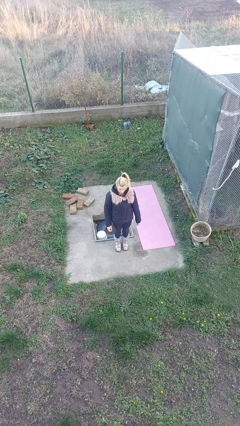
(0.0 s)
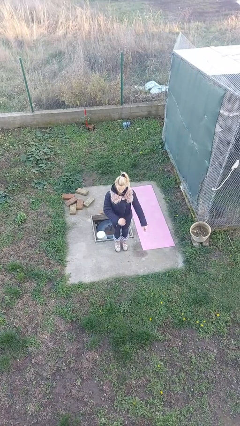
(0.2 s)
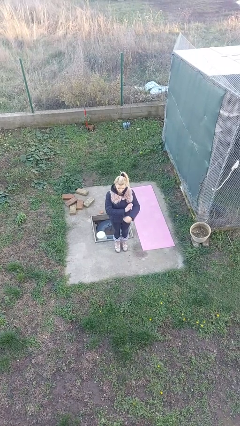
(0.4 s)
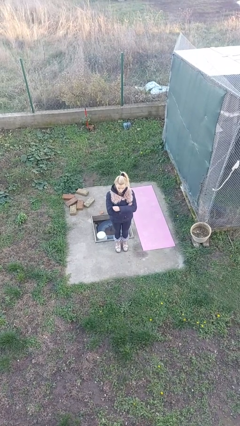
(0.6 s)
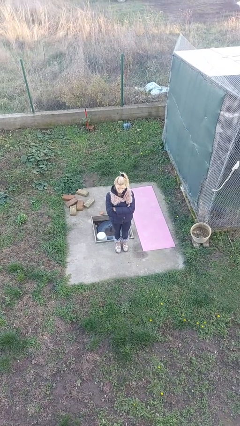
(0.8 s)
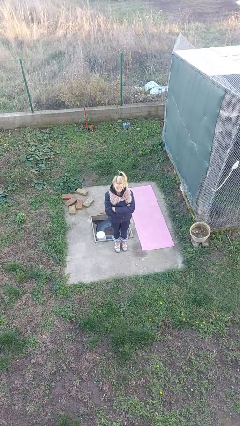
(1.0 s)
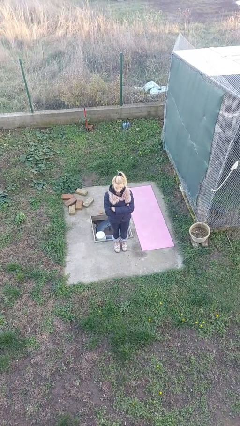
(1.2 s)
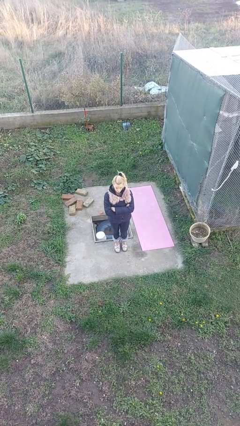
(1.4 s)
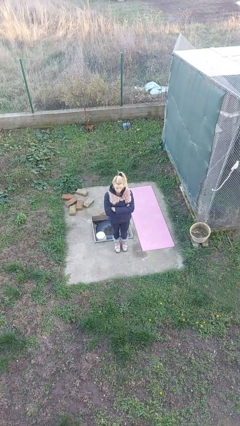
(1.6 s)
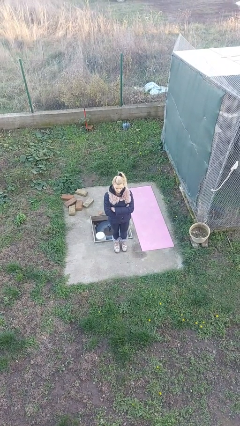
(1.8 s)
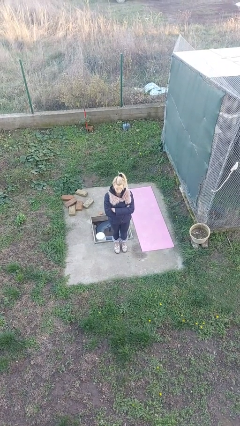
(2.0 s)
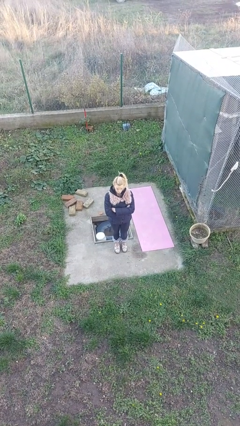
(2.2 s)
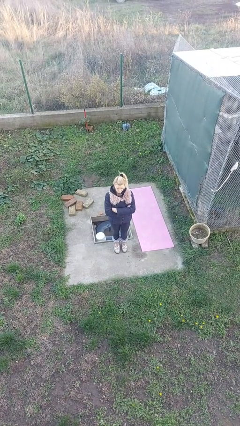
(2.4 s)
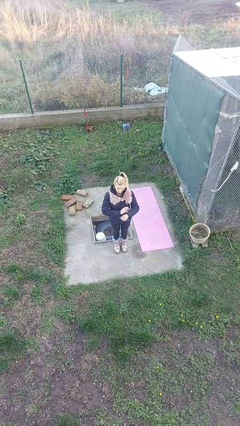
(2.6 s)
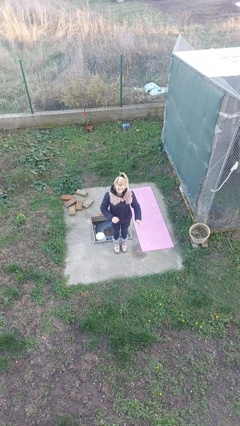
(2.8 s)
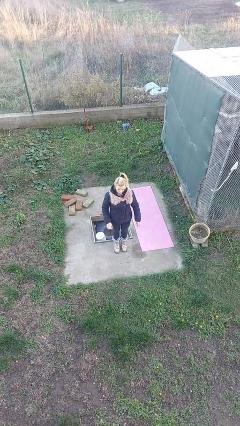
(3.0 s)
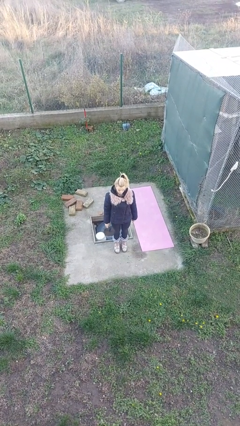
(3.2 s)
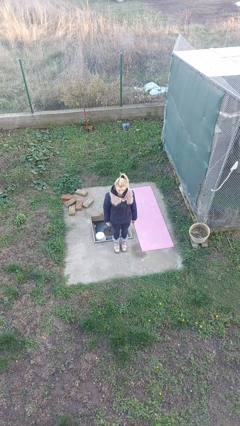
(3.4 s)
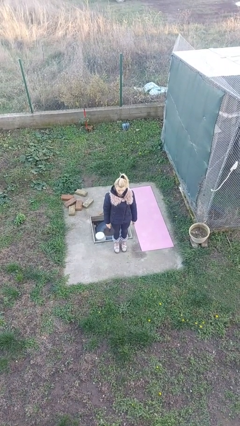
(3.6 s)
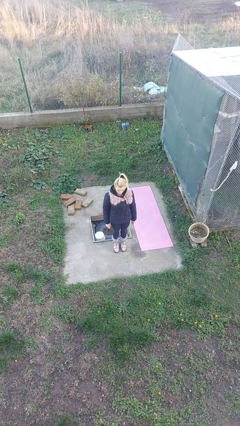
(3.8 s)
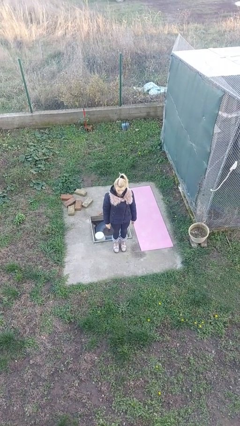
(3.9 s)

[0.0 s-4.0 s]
person crosses arms

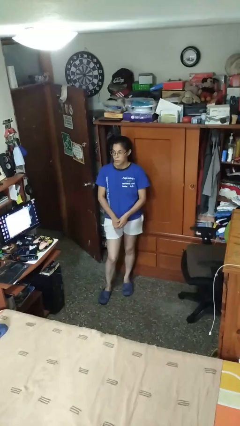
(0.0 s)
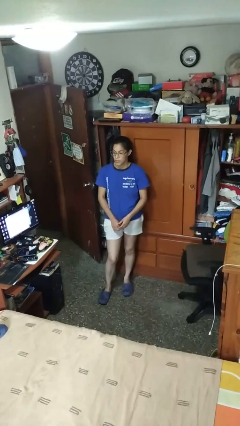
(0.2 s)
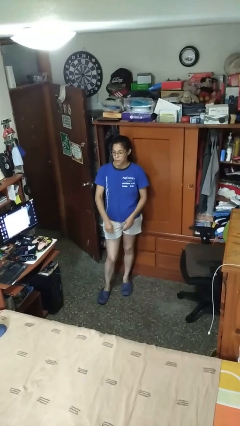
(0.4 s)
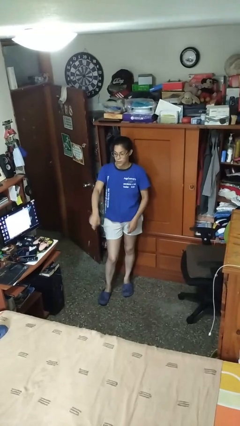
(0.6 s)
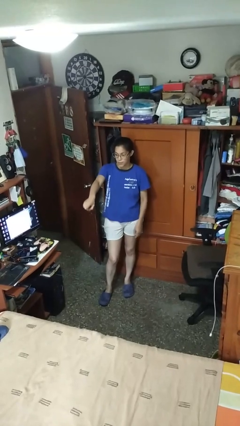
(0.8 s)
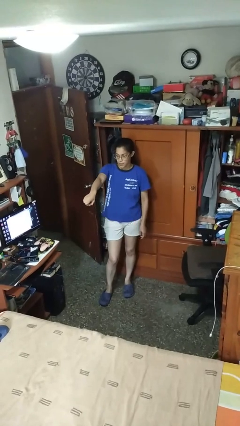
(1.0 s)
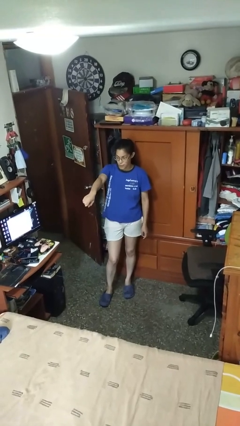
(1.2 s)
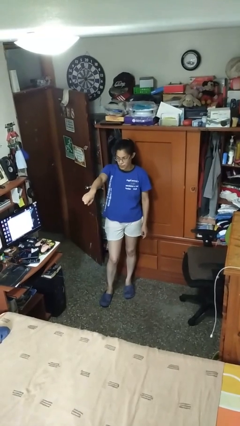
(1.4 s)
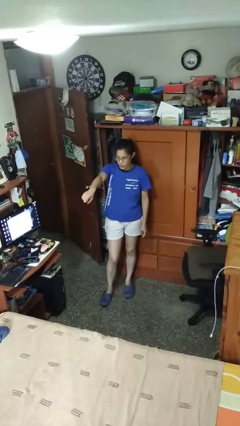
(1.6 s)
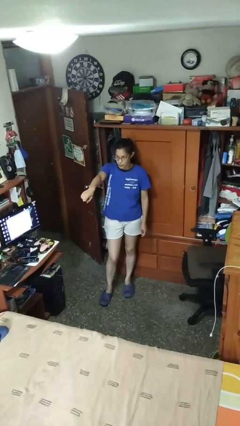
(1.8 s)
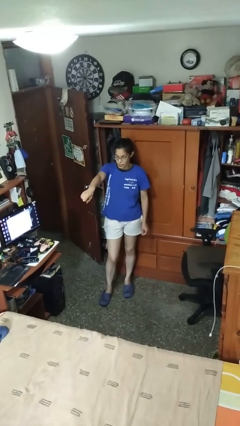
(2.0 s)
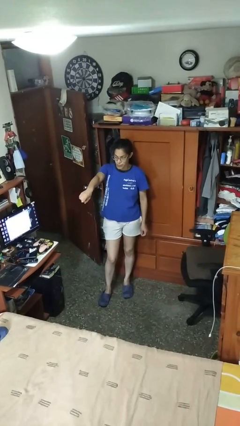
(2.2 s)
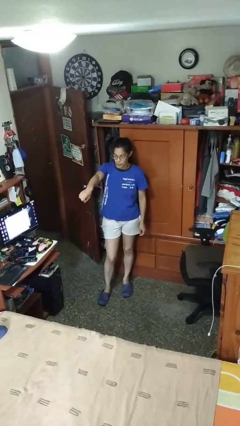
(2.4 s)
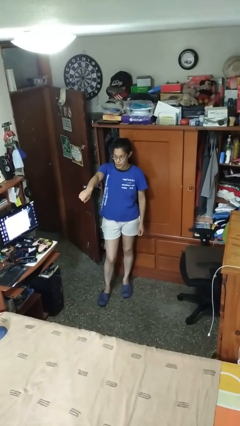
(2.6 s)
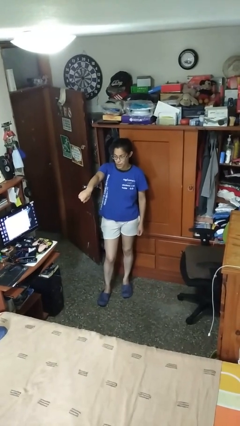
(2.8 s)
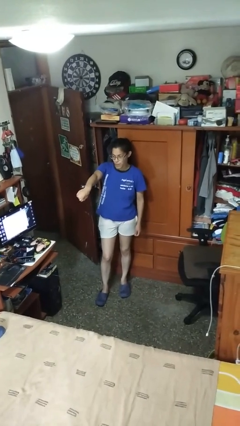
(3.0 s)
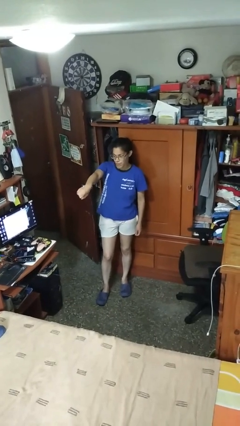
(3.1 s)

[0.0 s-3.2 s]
person points at person

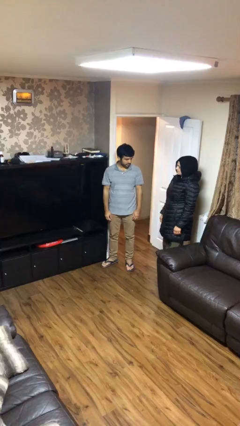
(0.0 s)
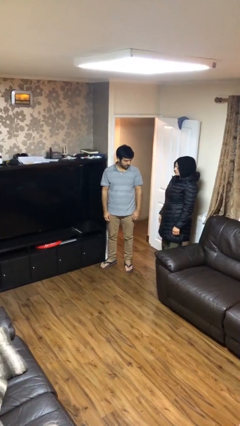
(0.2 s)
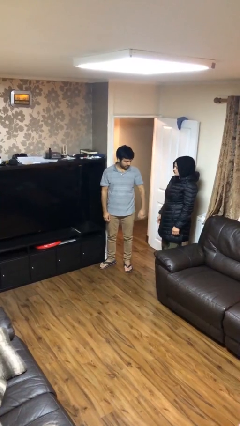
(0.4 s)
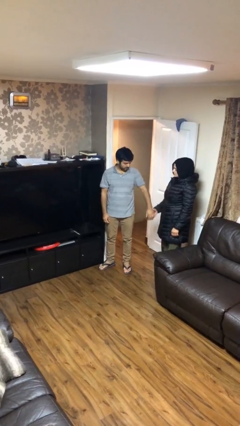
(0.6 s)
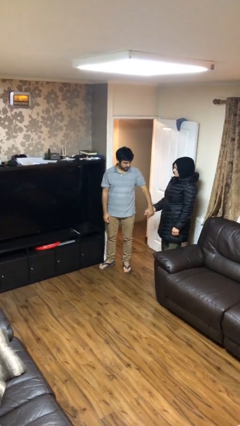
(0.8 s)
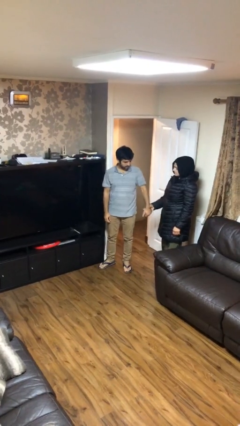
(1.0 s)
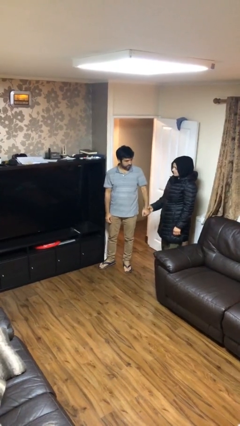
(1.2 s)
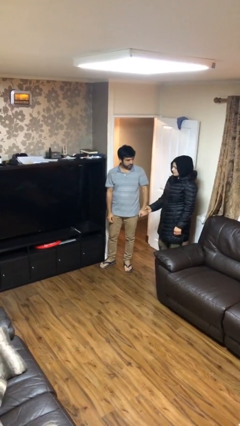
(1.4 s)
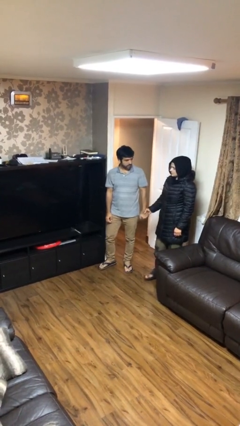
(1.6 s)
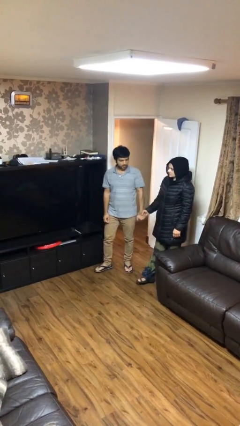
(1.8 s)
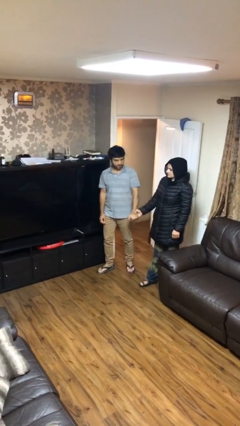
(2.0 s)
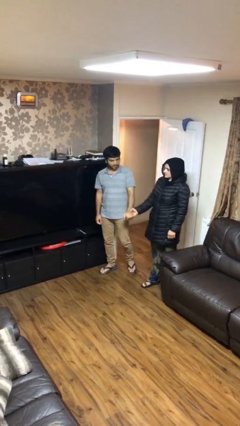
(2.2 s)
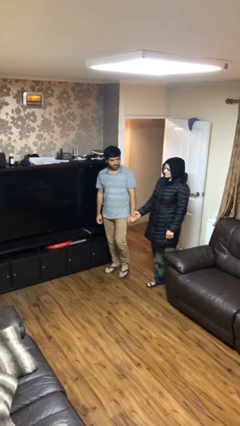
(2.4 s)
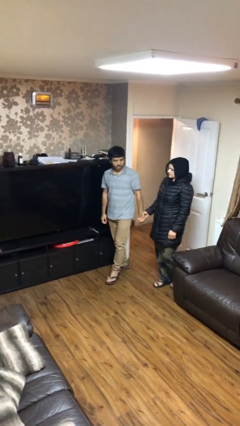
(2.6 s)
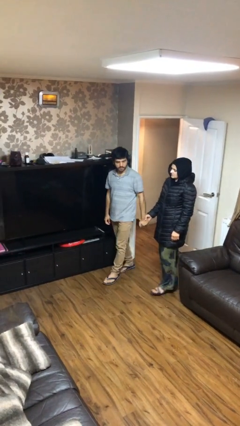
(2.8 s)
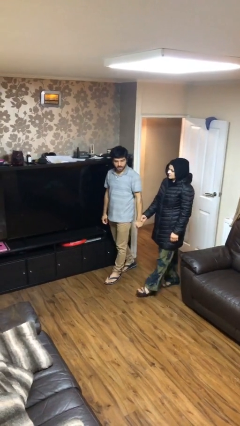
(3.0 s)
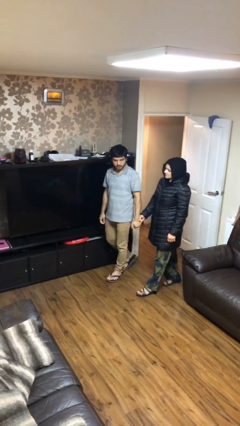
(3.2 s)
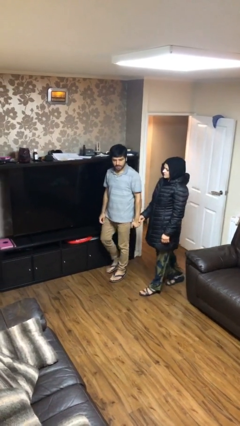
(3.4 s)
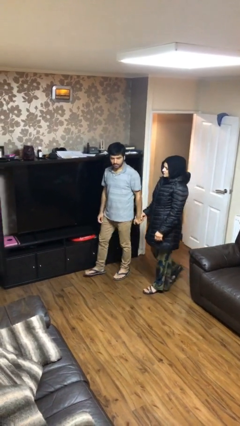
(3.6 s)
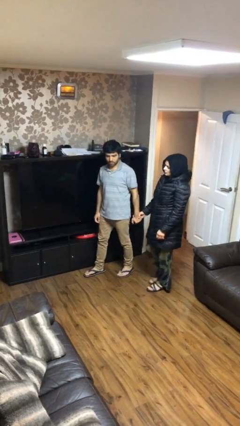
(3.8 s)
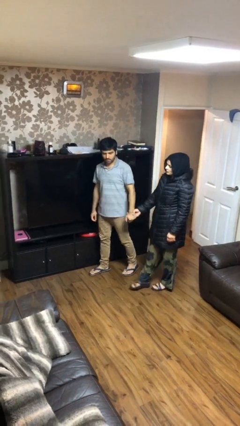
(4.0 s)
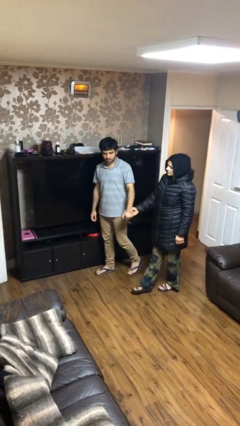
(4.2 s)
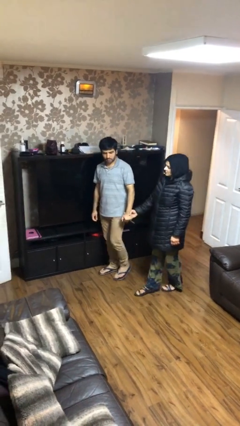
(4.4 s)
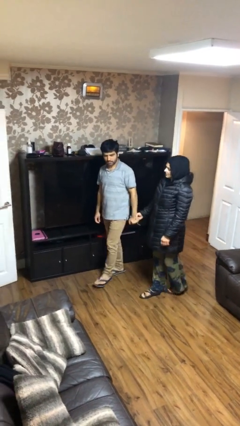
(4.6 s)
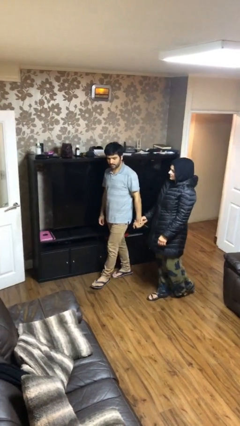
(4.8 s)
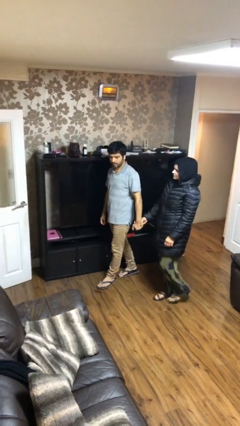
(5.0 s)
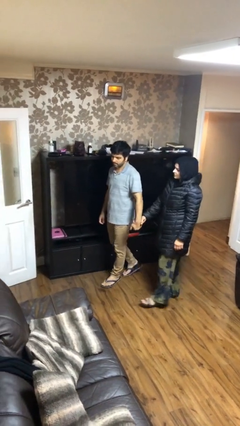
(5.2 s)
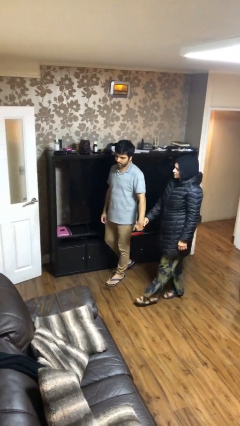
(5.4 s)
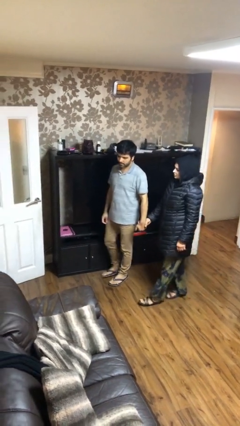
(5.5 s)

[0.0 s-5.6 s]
person holds hand

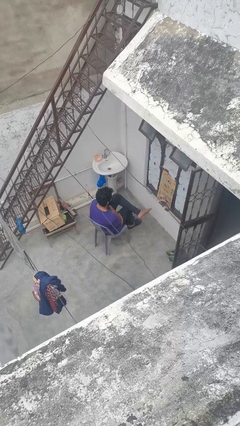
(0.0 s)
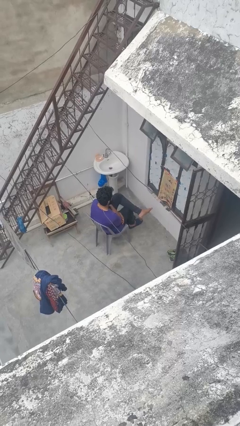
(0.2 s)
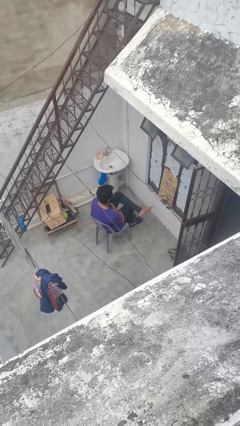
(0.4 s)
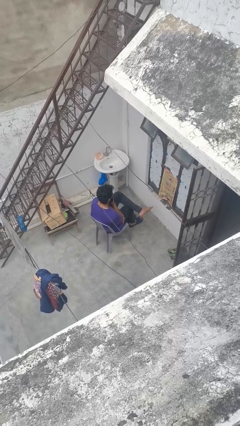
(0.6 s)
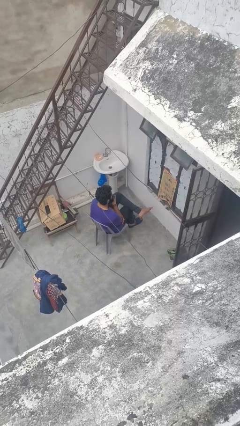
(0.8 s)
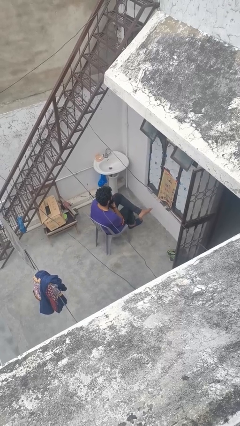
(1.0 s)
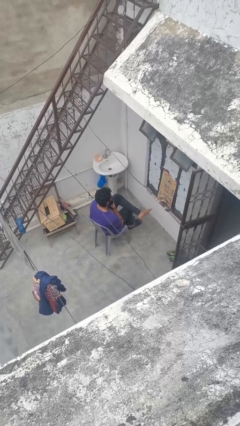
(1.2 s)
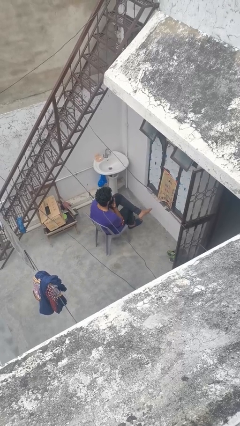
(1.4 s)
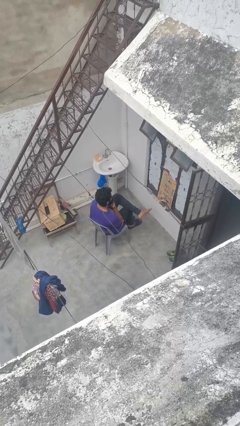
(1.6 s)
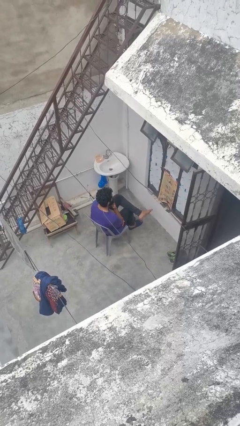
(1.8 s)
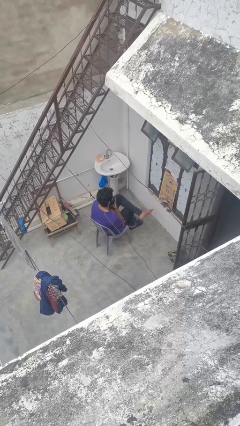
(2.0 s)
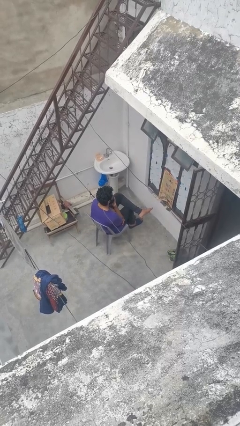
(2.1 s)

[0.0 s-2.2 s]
person strokes chin

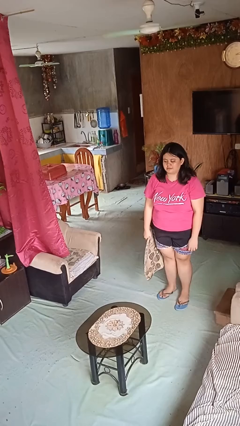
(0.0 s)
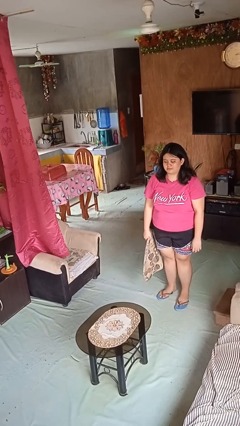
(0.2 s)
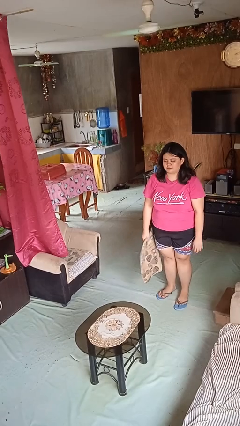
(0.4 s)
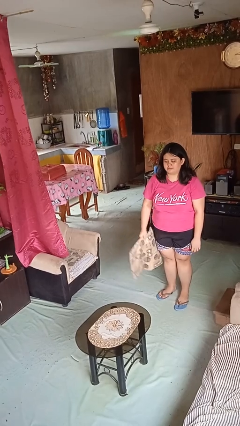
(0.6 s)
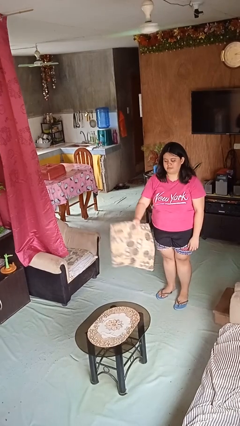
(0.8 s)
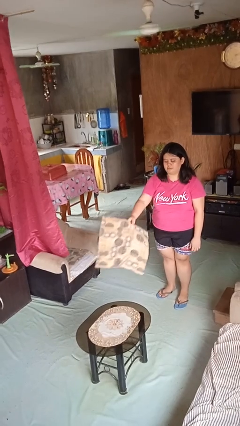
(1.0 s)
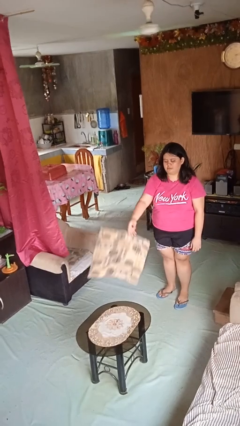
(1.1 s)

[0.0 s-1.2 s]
person throws object on table

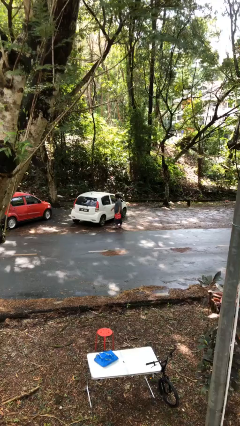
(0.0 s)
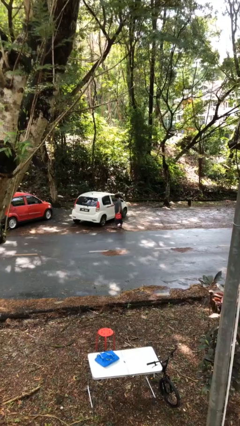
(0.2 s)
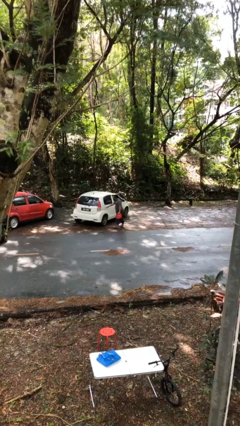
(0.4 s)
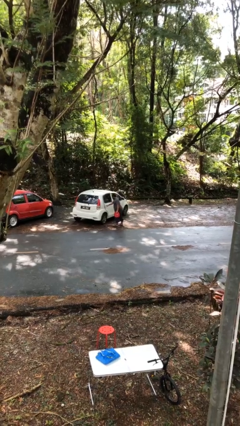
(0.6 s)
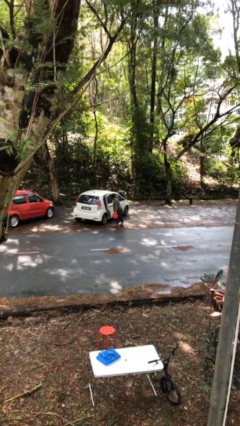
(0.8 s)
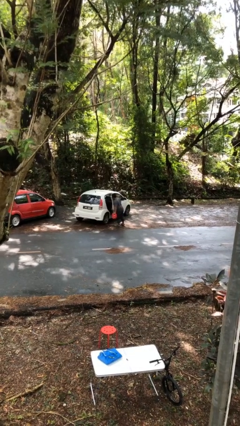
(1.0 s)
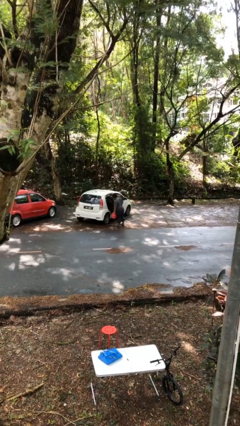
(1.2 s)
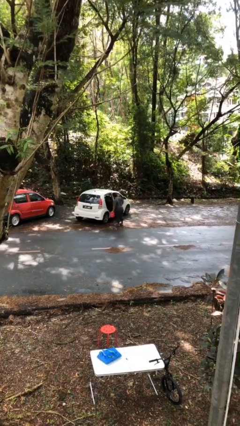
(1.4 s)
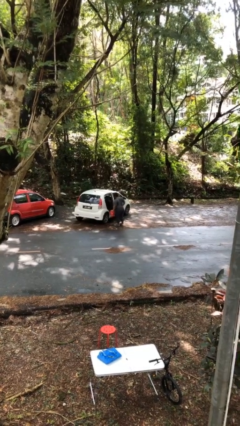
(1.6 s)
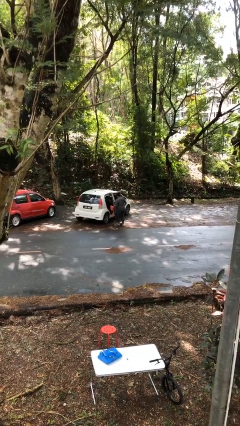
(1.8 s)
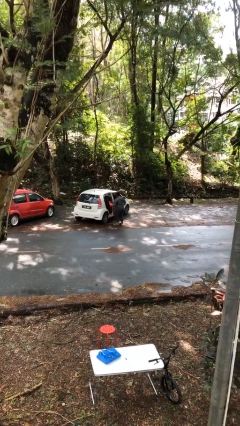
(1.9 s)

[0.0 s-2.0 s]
person opens car door
